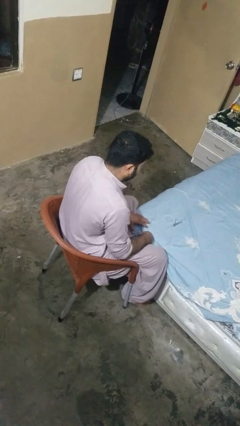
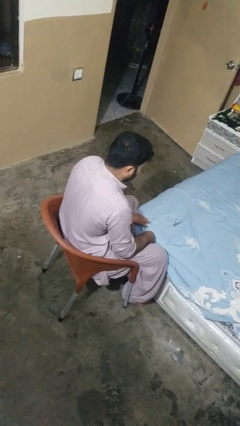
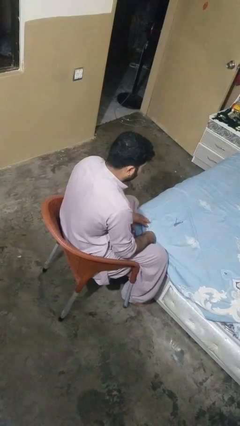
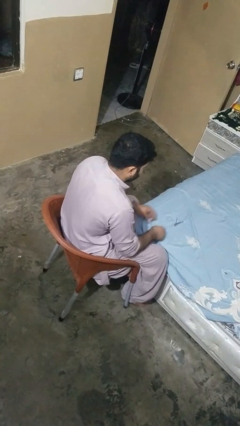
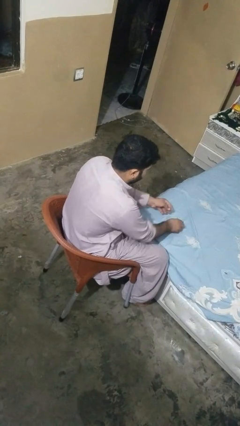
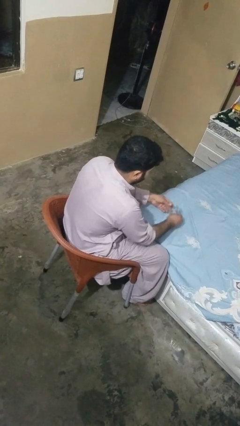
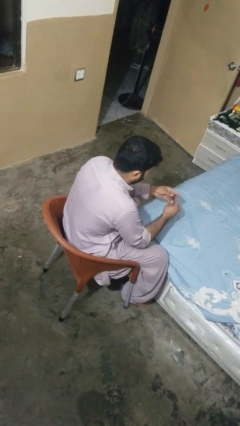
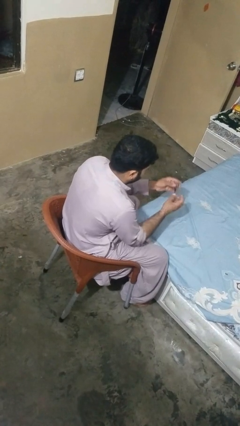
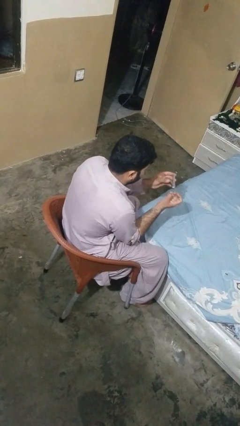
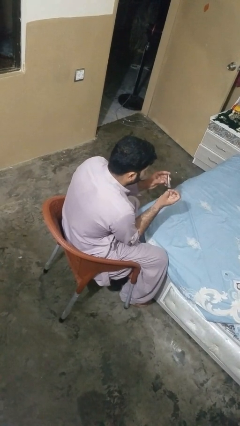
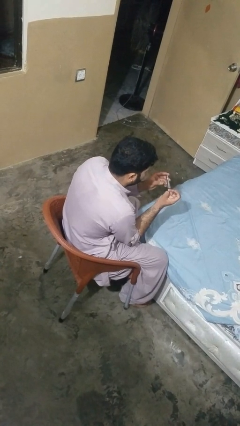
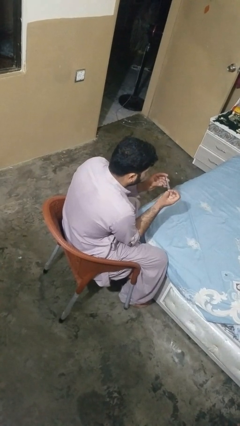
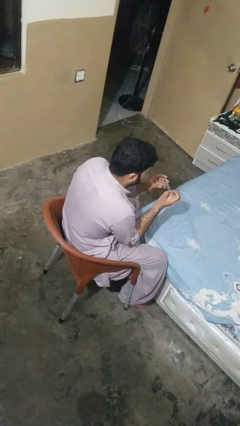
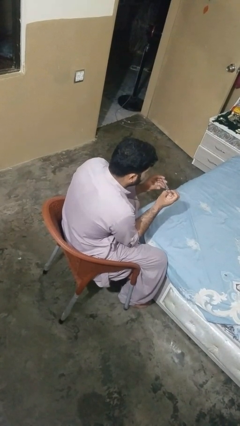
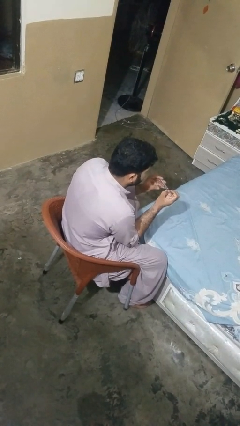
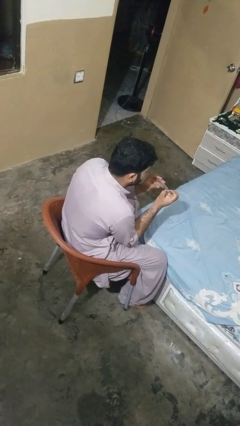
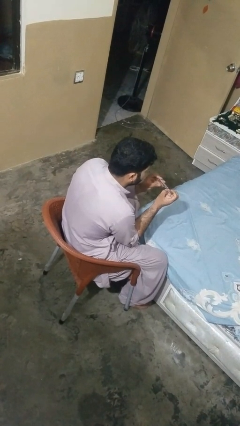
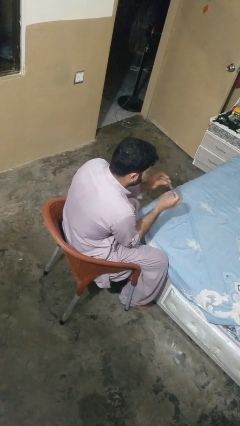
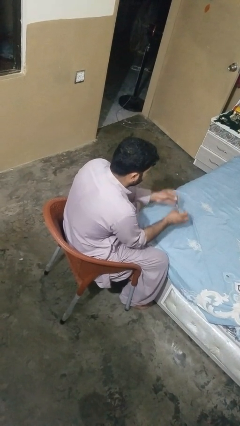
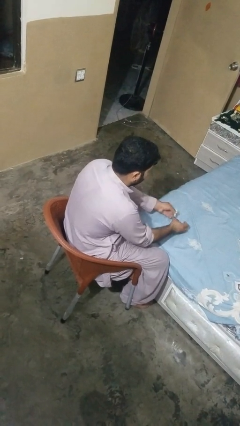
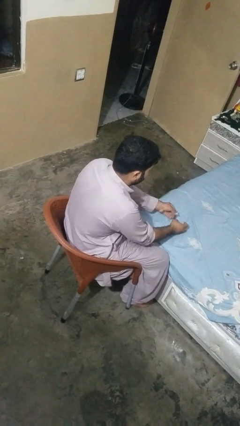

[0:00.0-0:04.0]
person clips fingernails

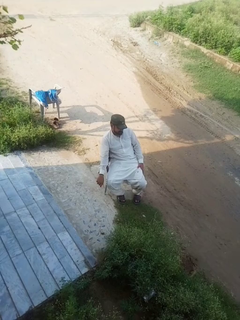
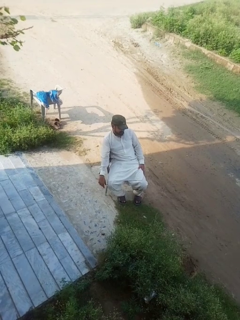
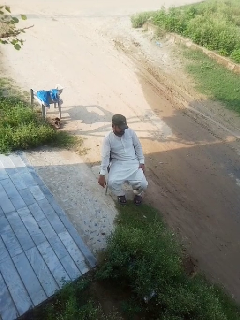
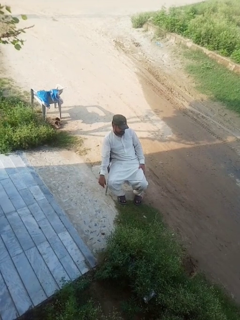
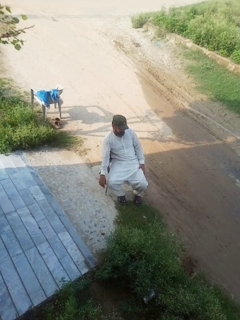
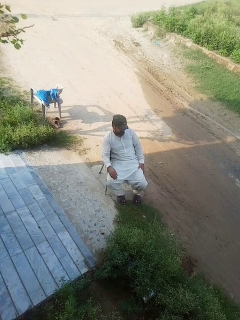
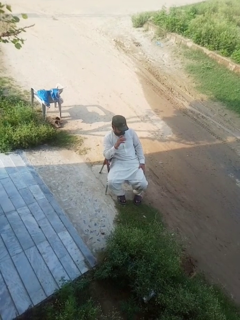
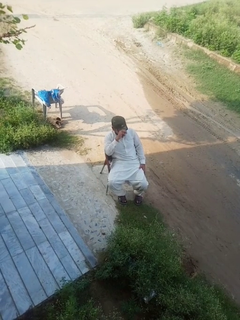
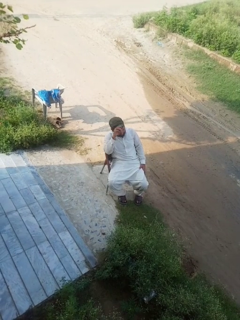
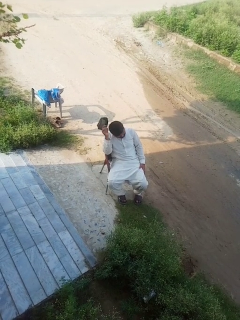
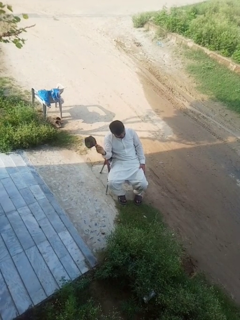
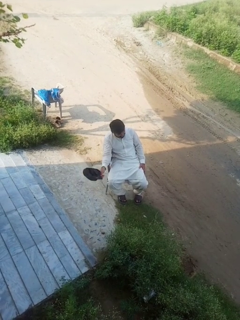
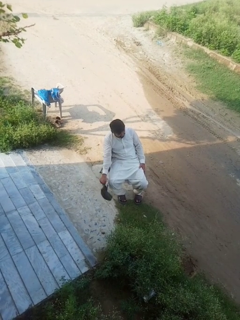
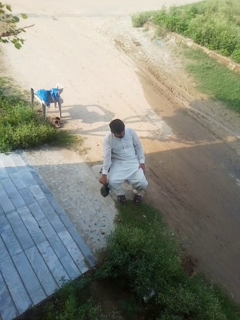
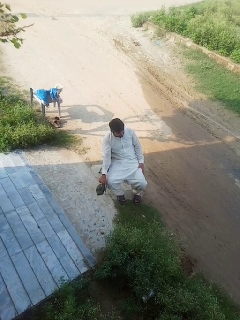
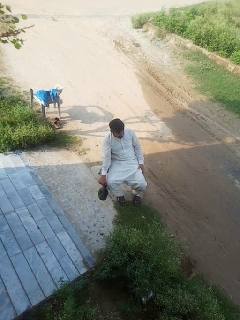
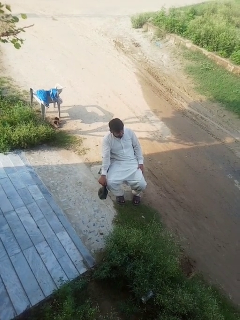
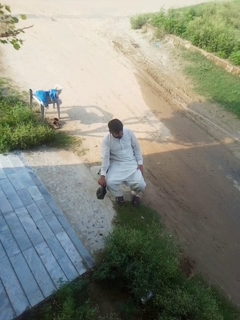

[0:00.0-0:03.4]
person takes off hat

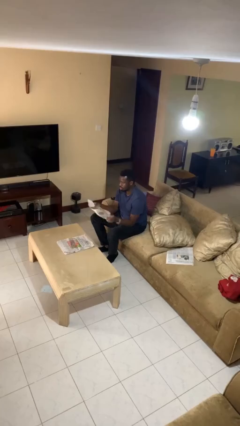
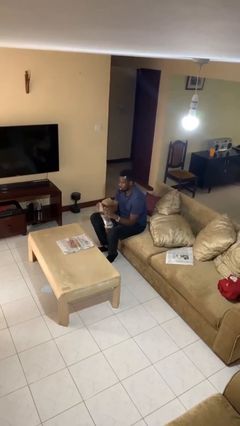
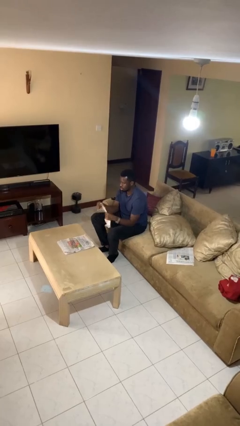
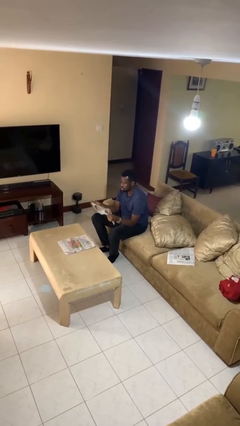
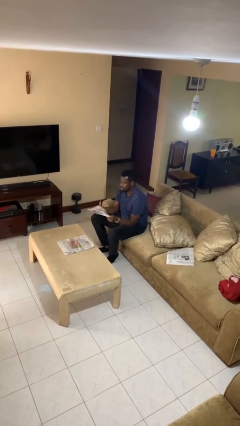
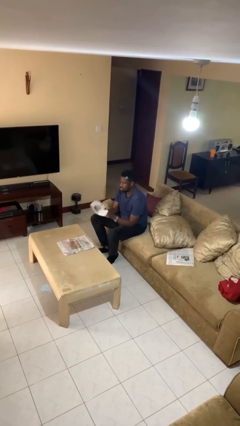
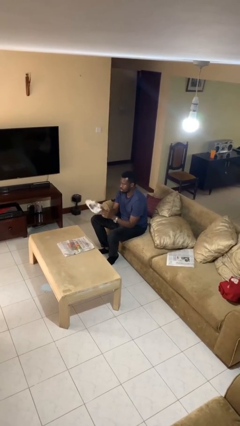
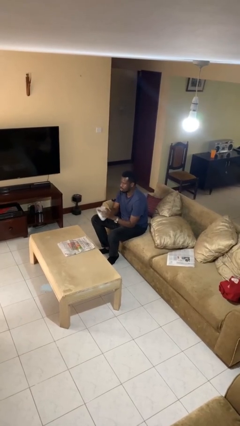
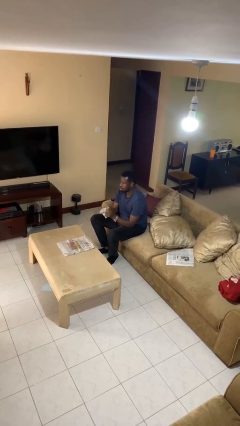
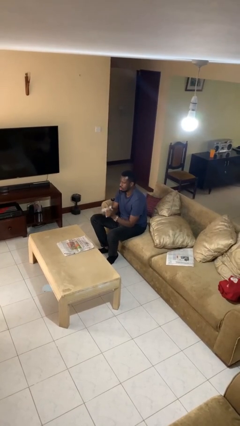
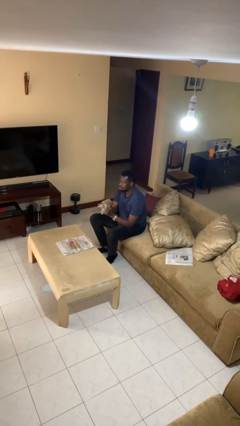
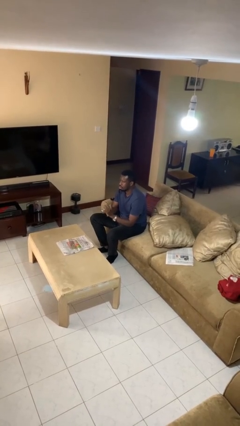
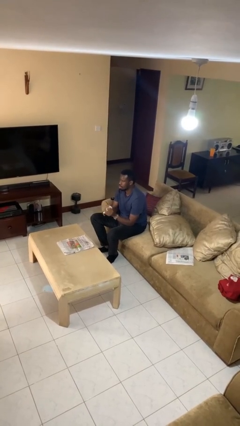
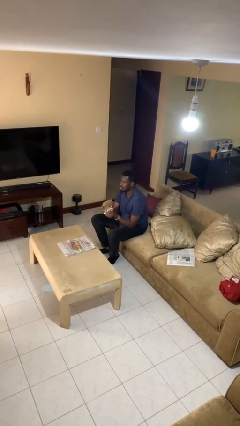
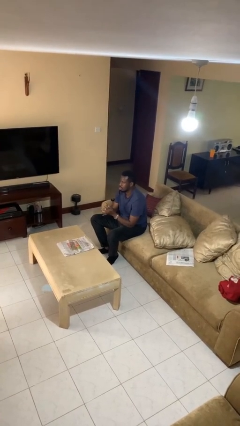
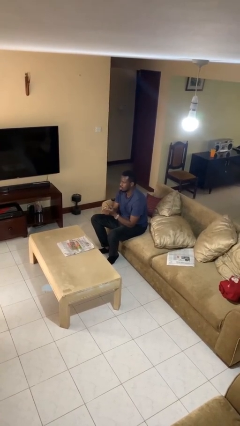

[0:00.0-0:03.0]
person crumples paper

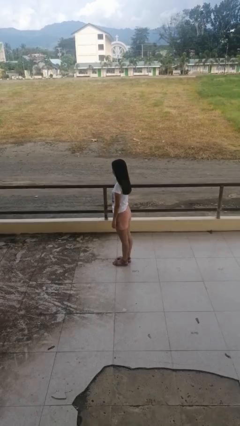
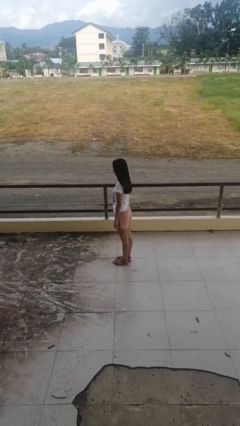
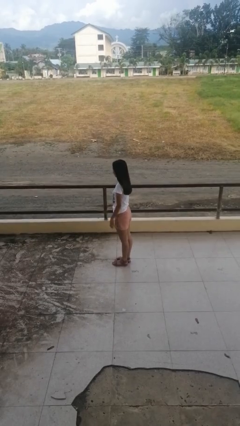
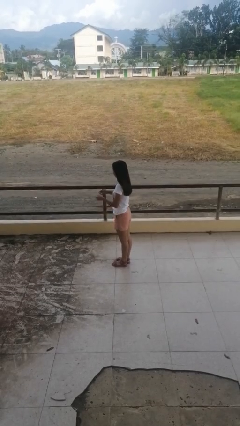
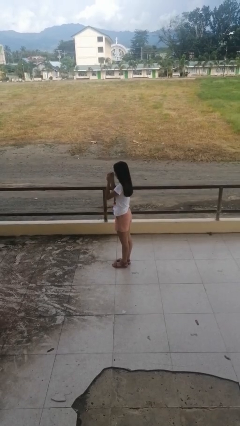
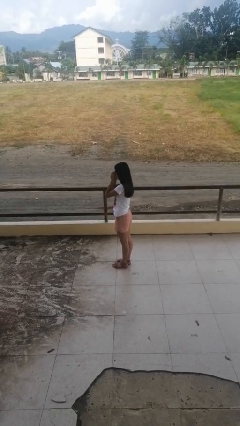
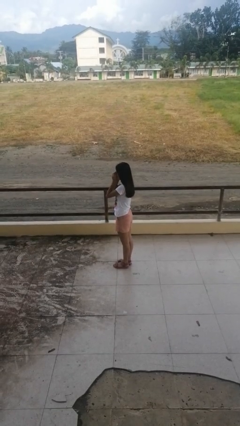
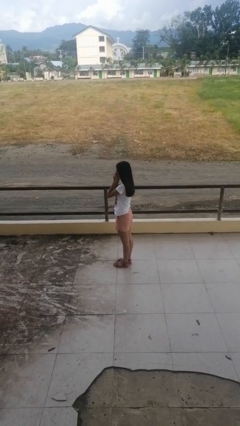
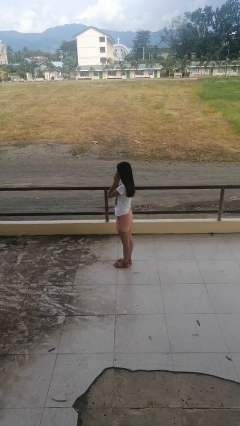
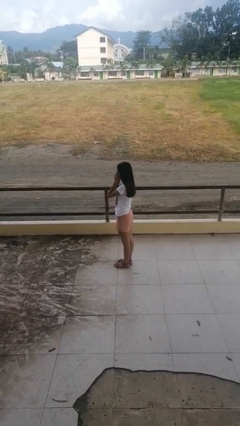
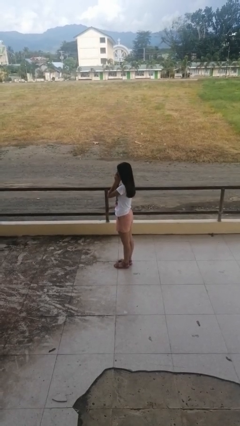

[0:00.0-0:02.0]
person rubs eyes

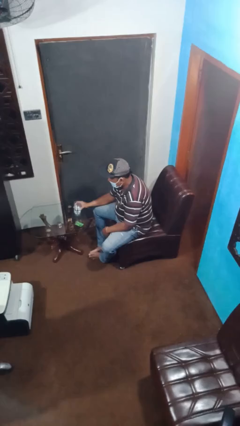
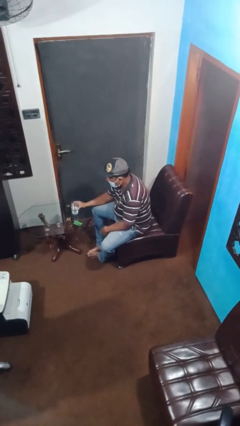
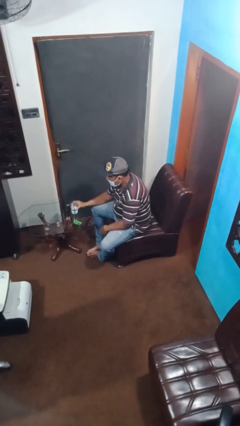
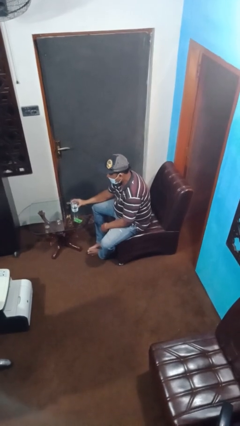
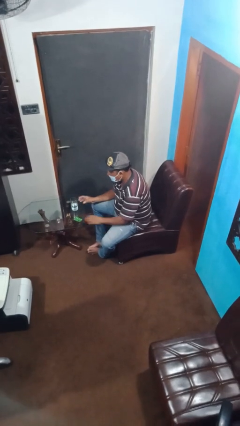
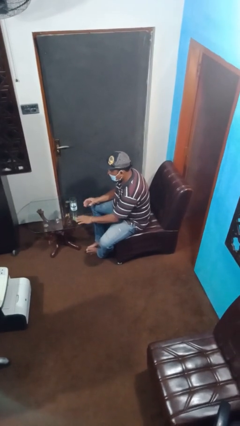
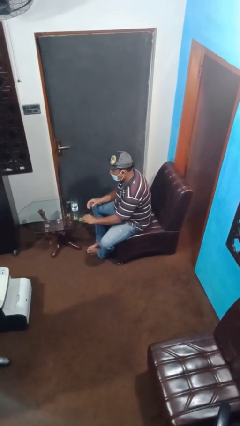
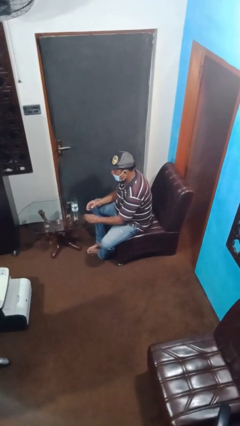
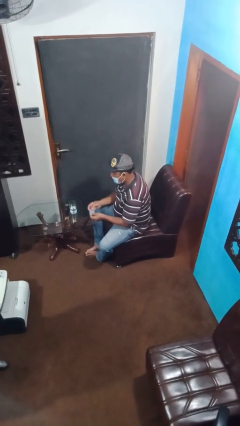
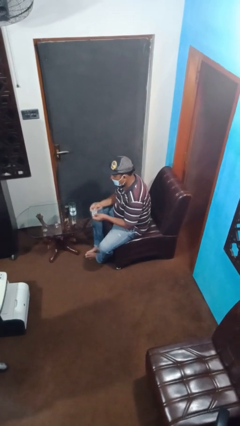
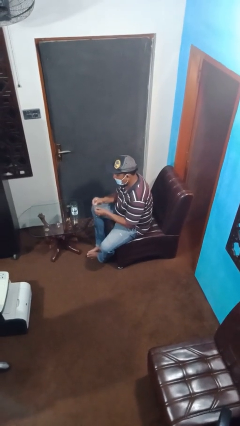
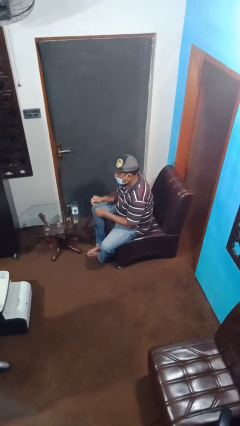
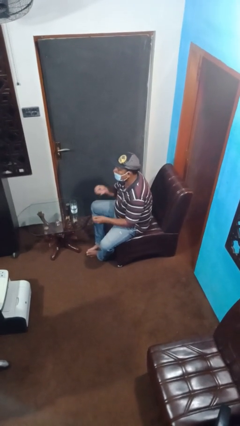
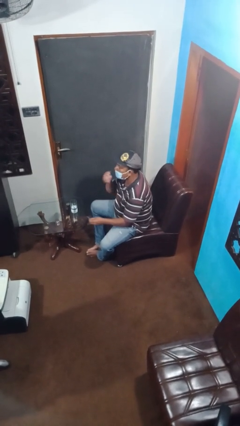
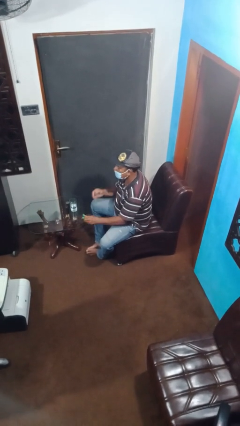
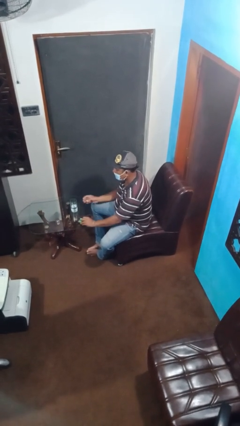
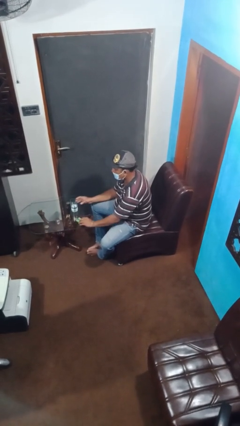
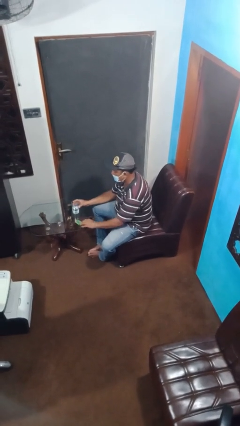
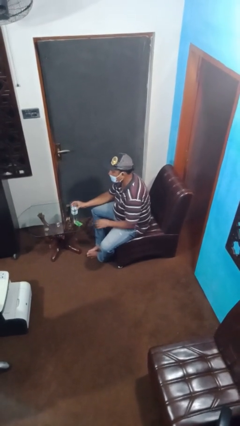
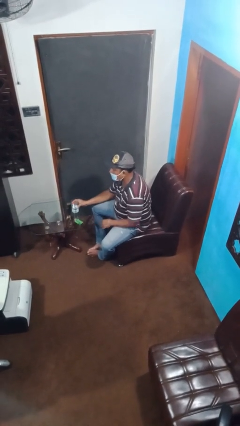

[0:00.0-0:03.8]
person takes medicine pills

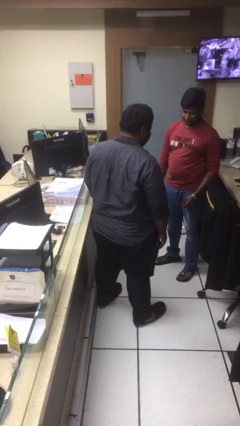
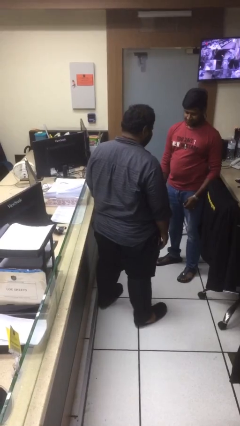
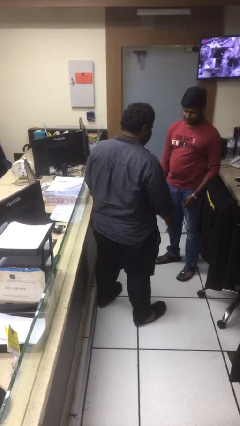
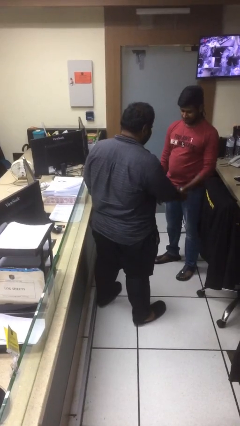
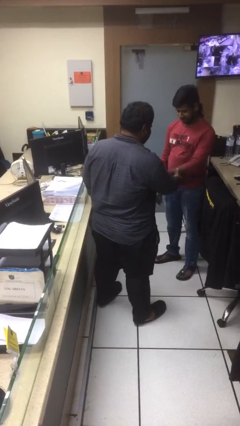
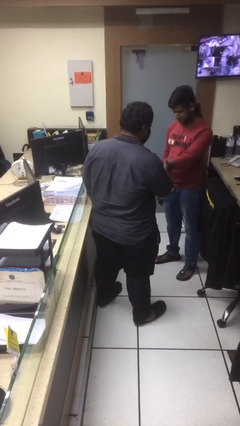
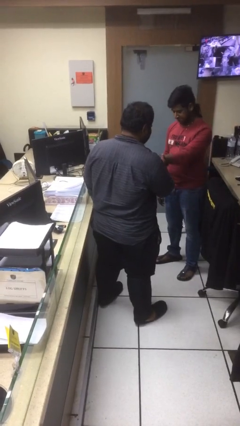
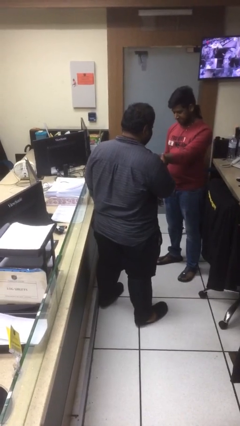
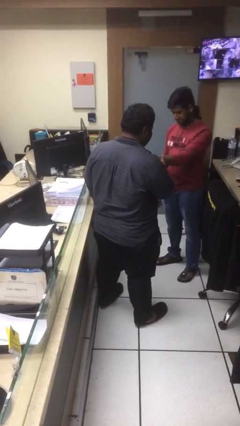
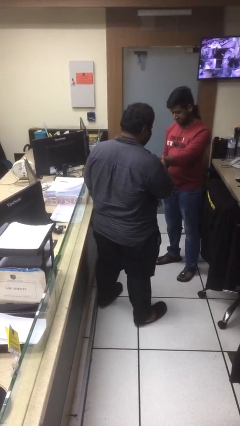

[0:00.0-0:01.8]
person grabs person by forearm

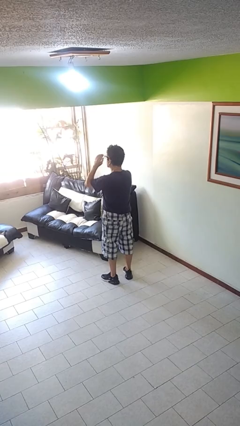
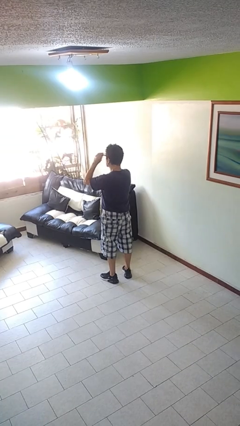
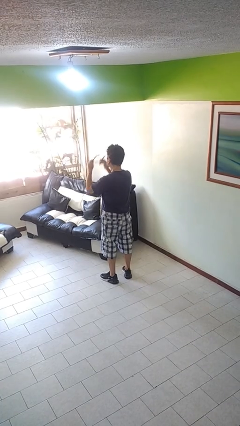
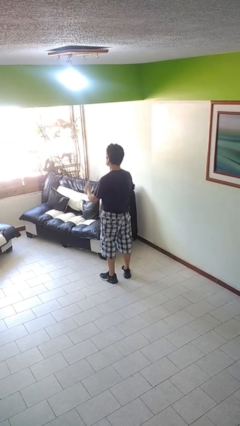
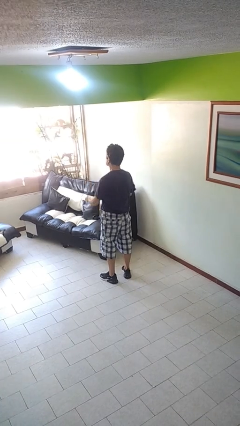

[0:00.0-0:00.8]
person takes off glasses
